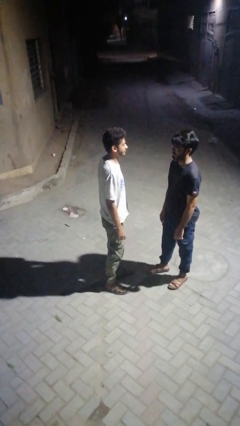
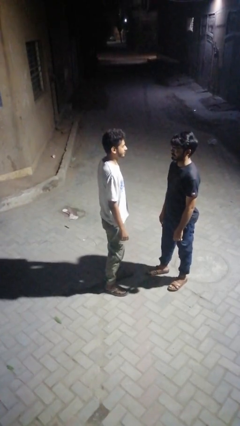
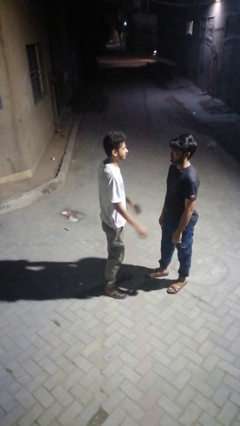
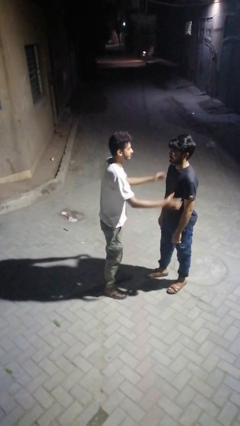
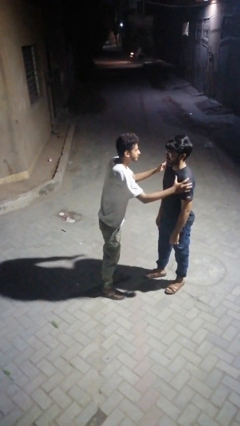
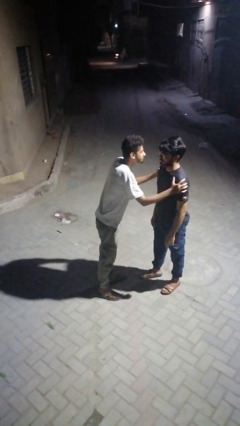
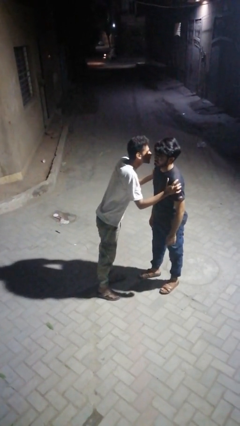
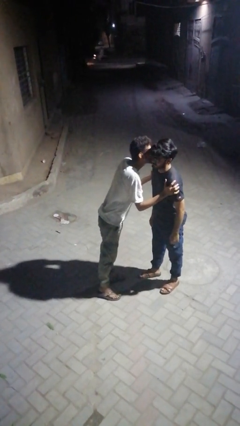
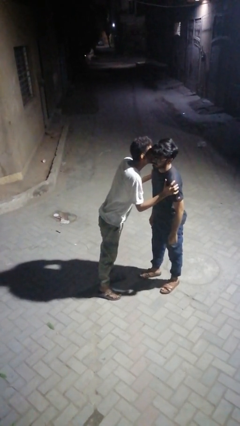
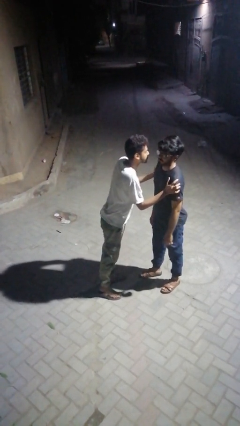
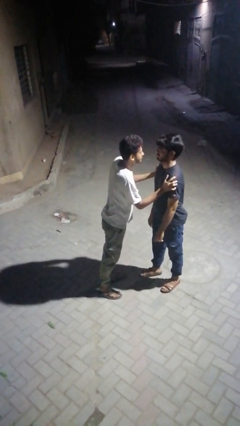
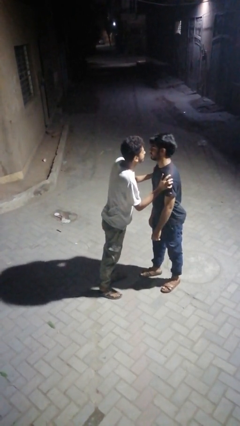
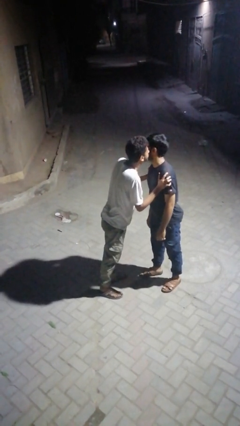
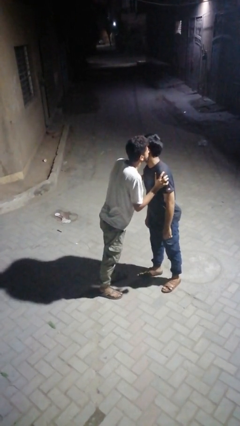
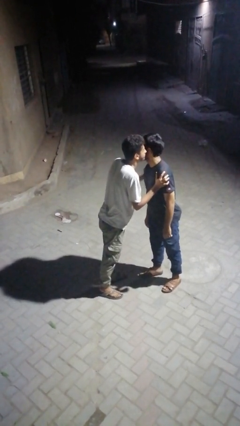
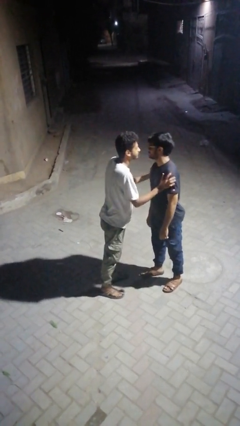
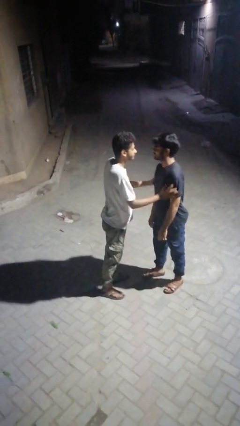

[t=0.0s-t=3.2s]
person kisses cheek of person

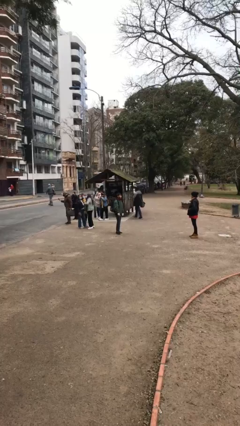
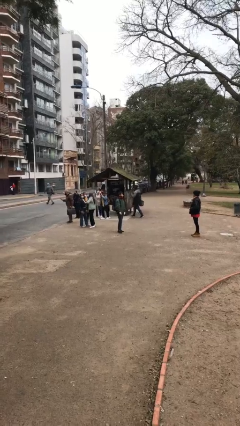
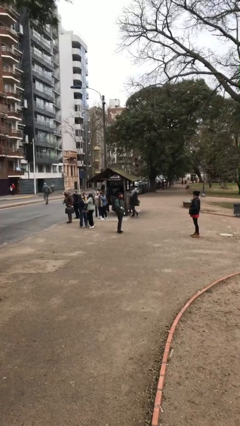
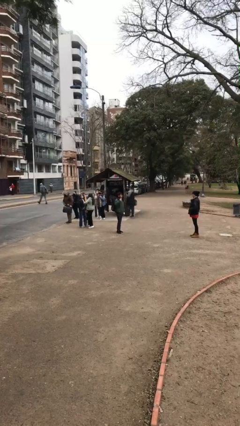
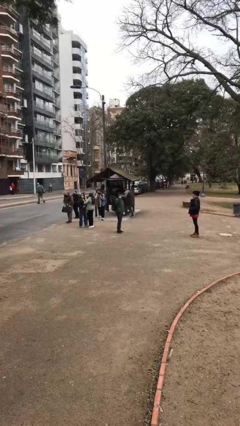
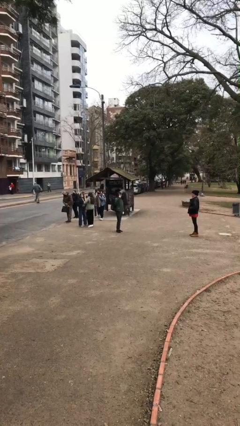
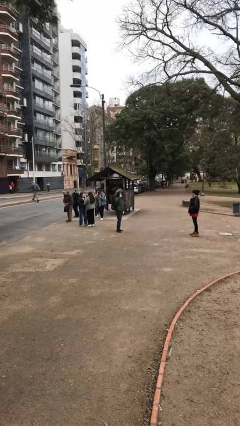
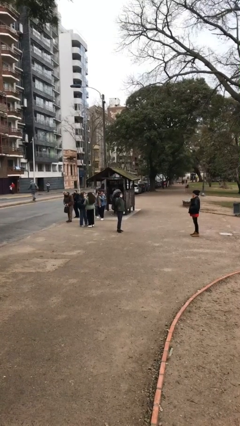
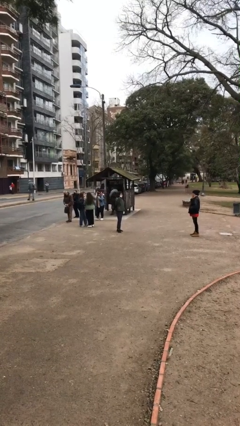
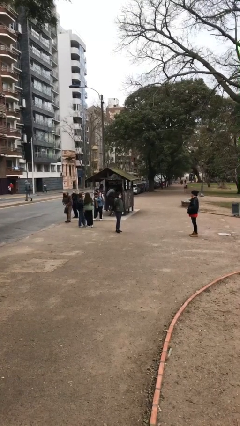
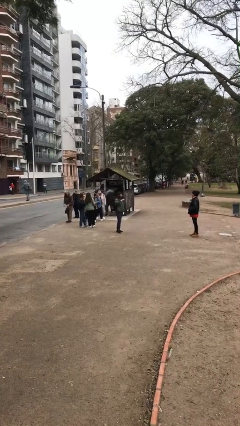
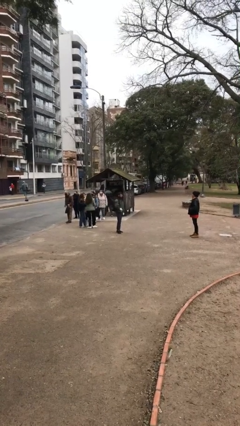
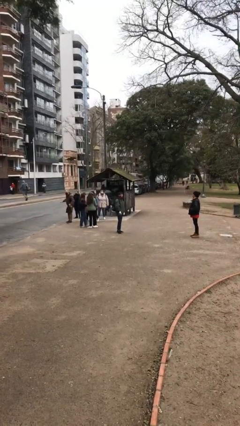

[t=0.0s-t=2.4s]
person waves at person

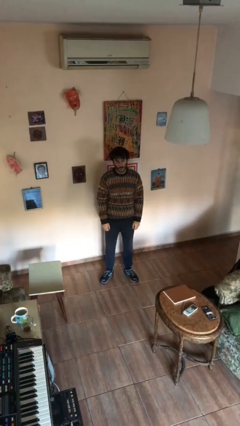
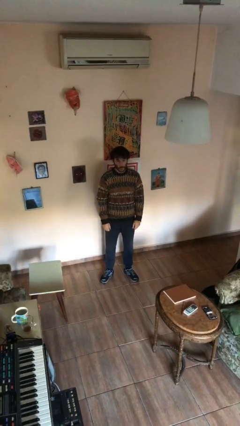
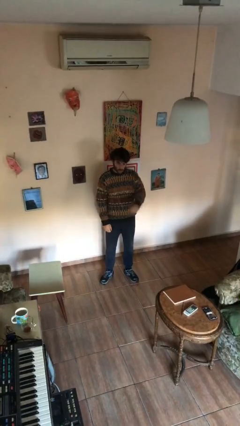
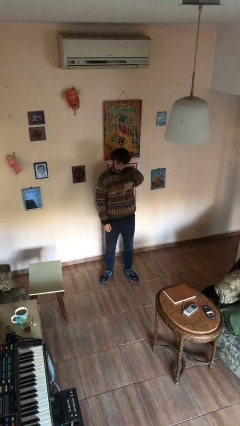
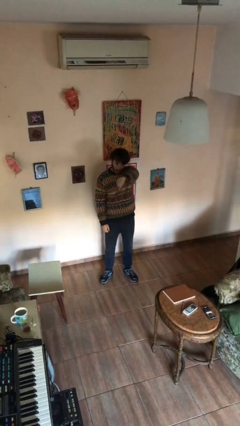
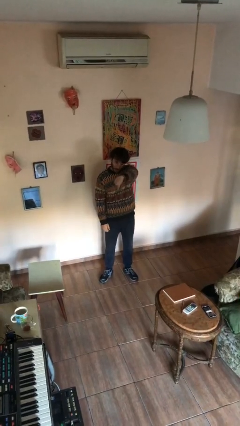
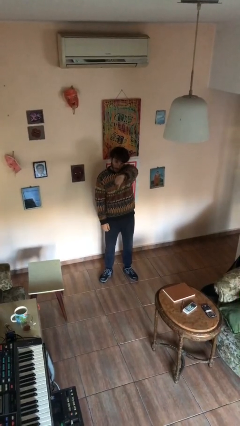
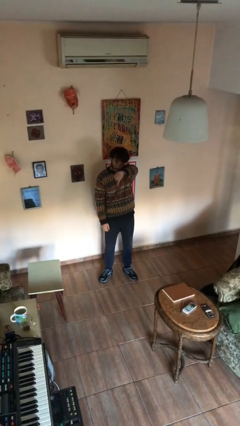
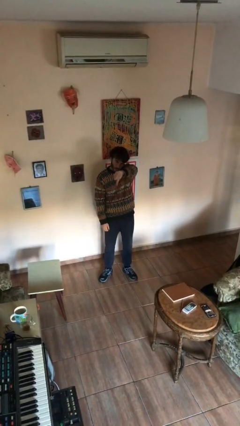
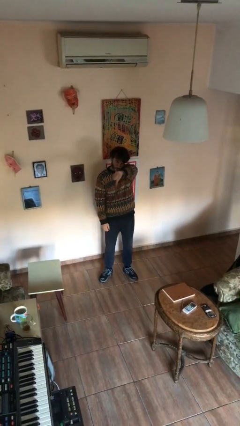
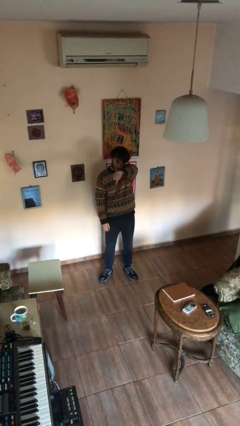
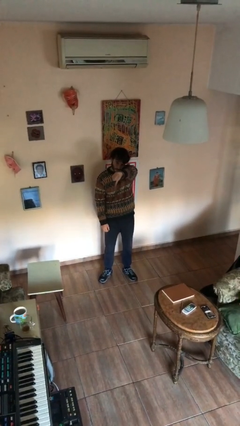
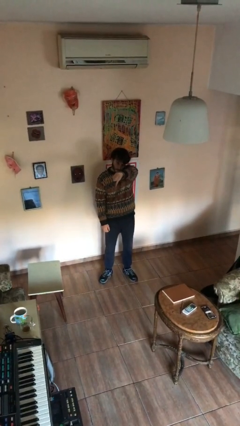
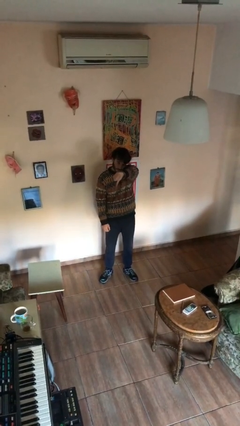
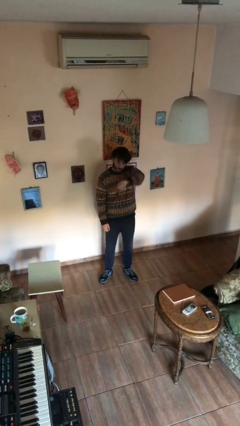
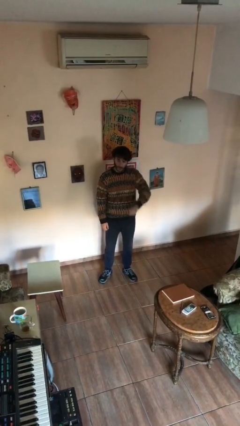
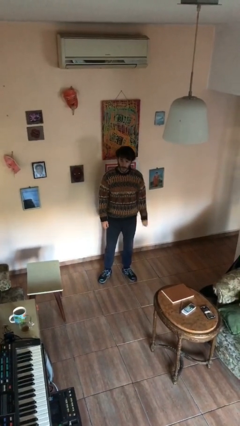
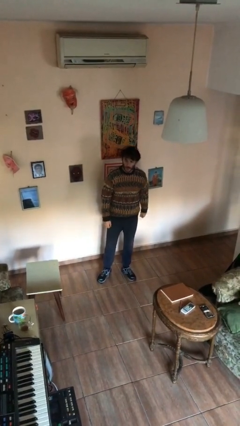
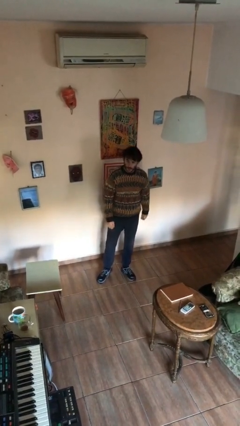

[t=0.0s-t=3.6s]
person gestures thumbs down

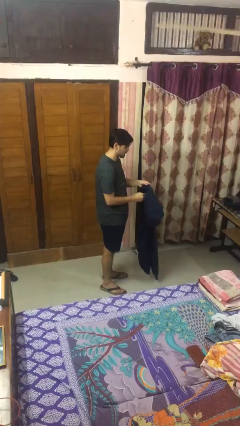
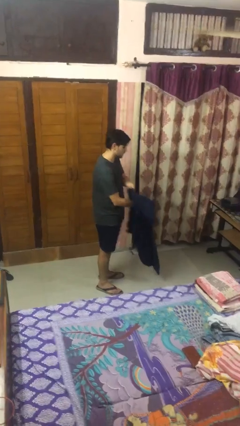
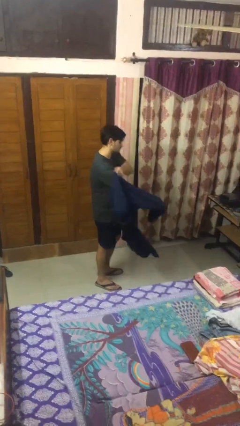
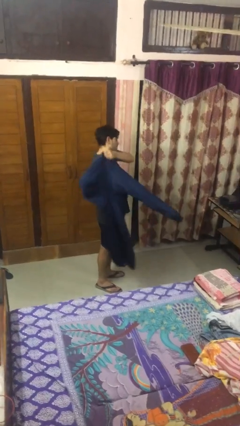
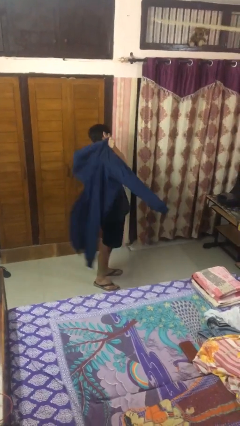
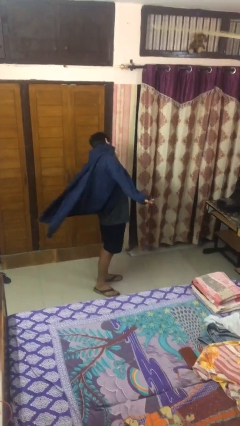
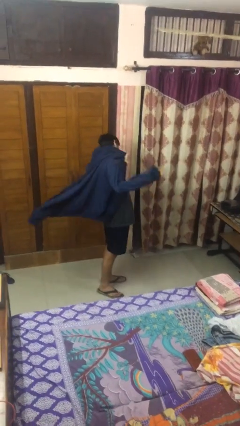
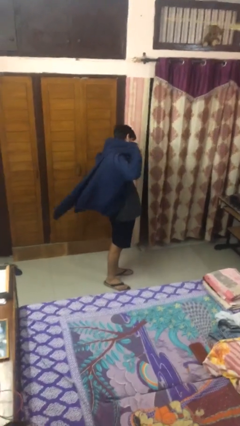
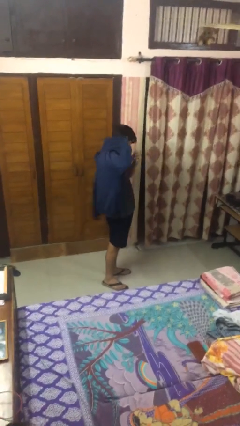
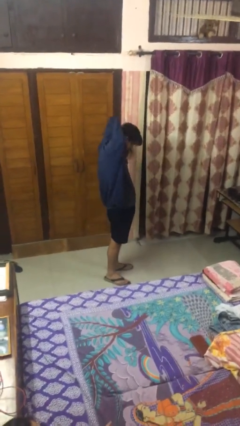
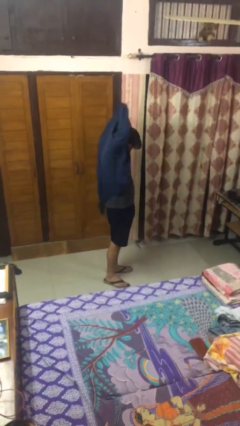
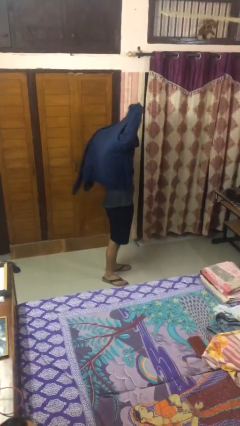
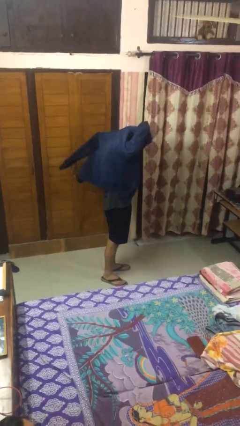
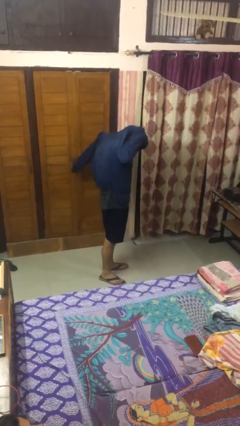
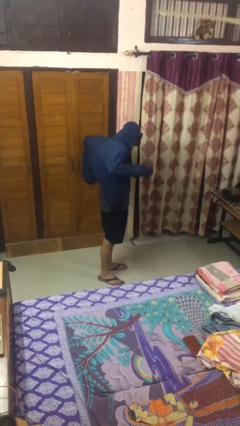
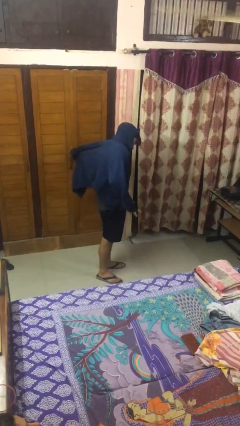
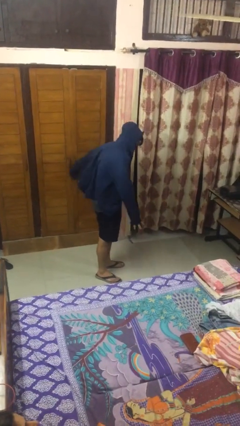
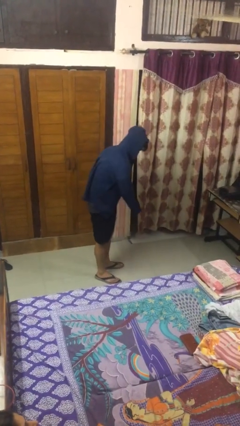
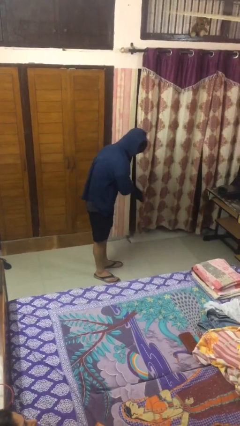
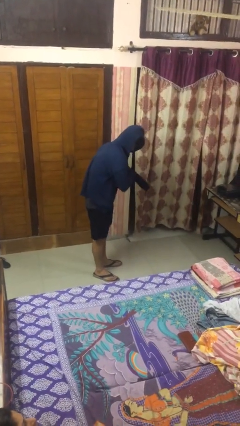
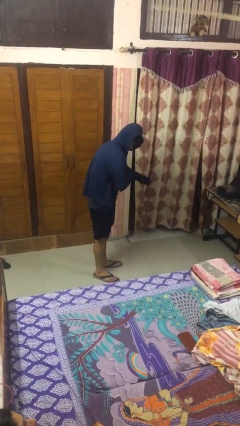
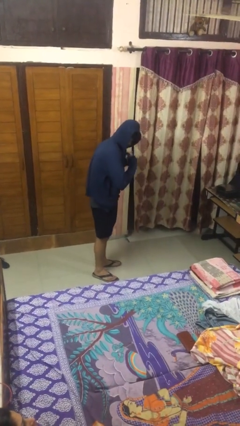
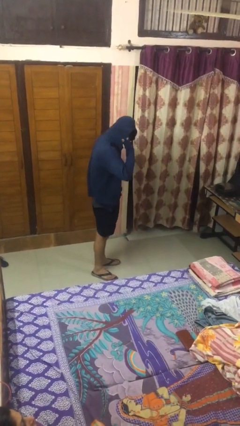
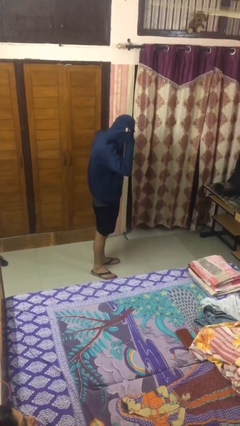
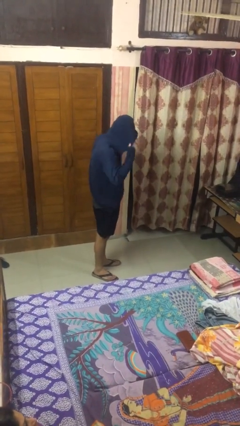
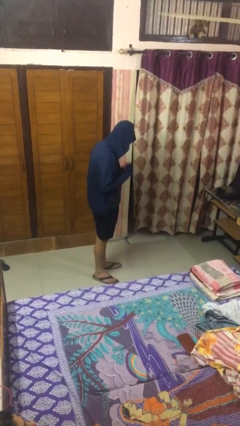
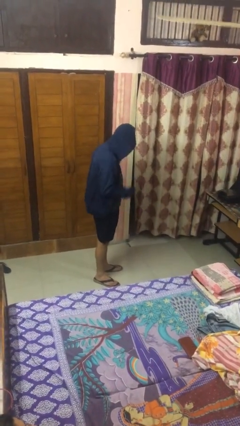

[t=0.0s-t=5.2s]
person puts on hoodie

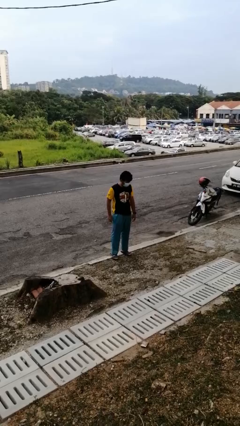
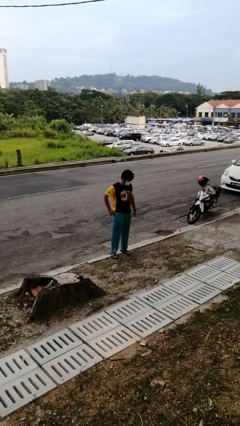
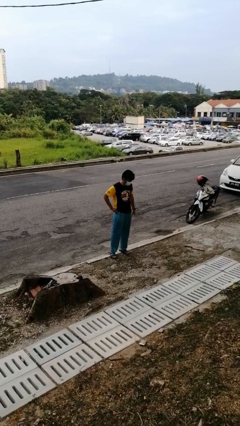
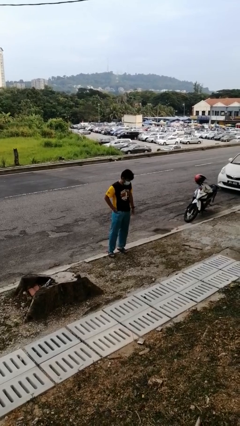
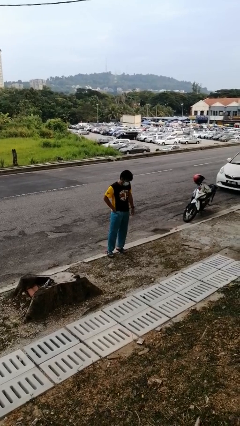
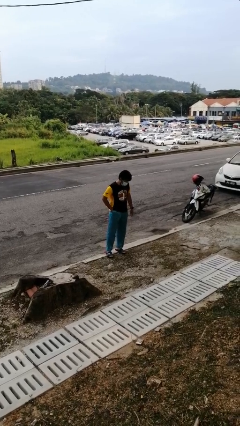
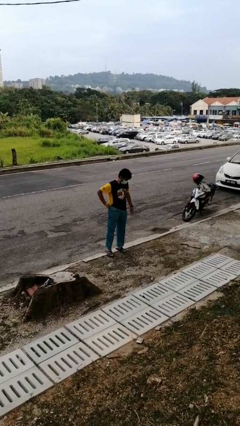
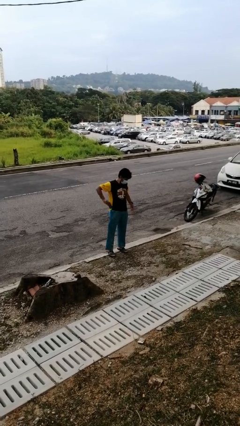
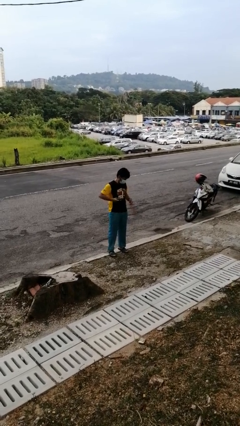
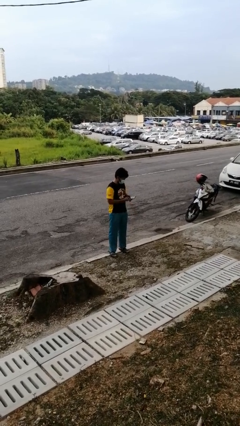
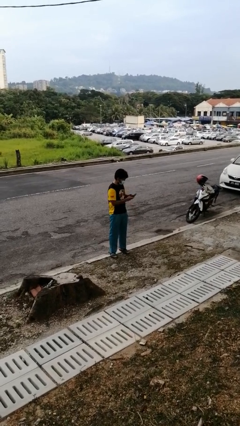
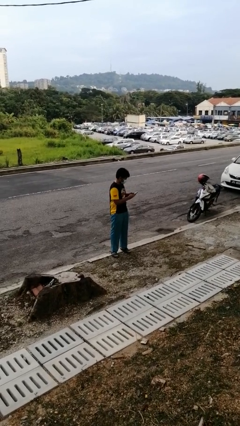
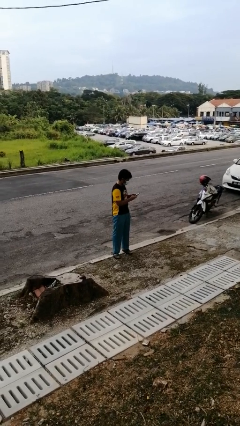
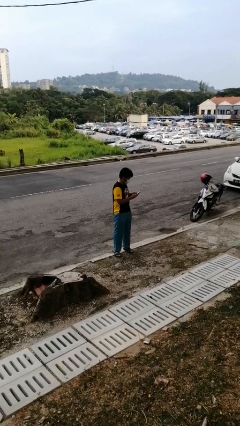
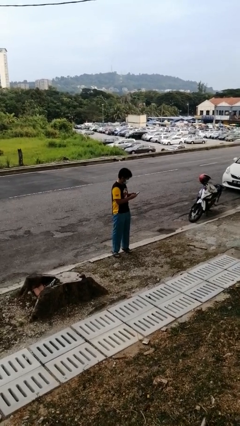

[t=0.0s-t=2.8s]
person takes phone from pocket
